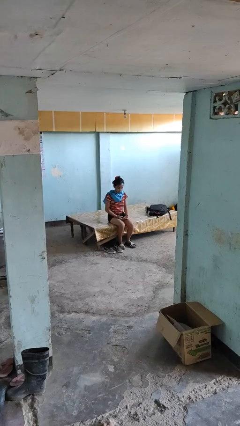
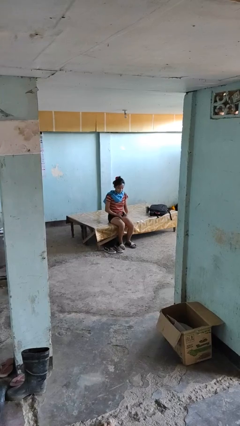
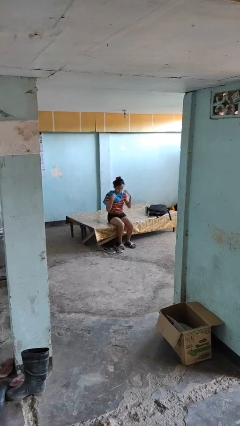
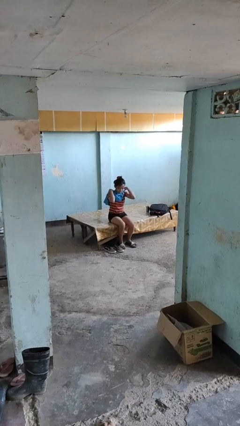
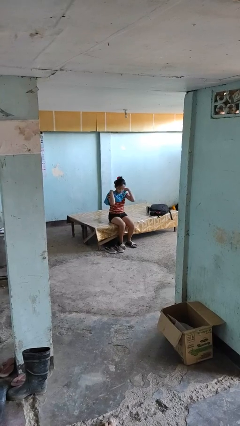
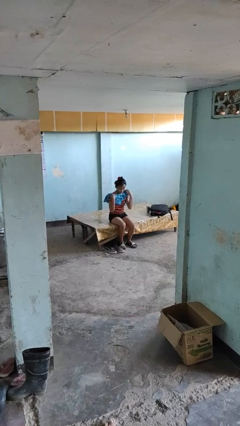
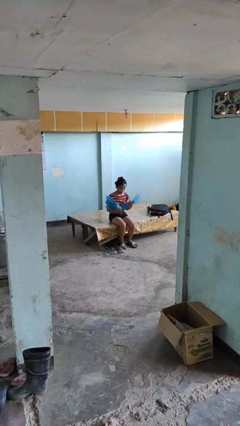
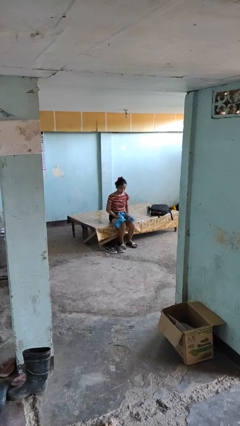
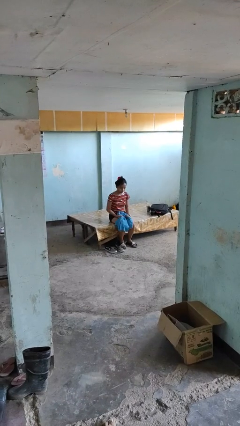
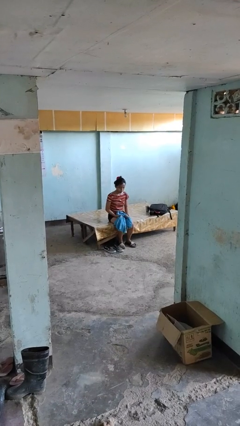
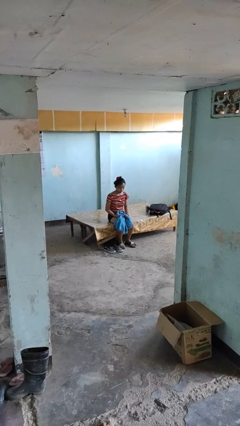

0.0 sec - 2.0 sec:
person takes off scarf

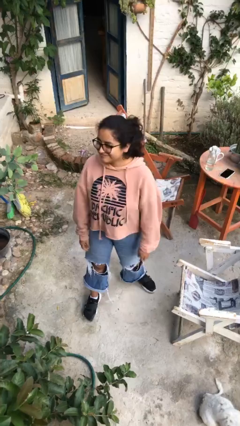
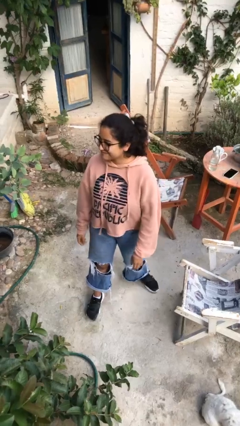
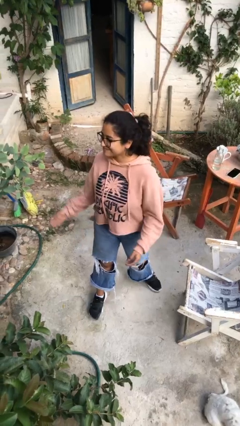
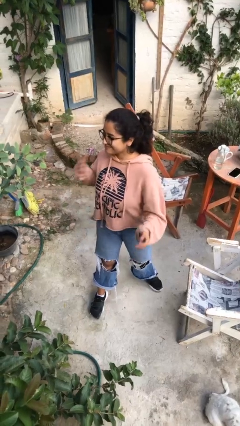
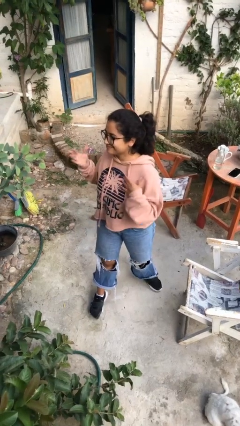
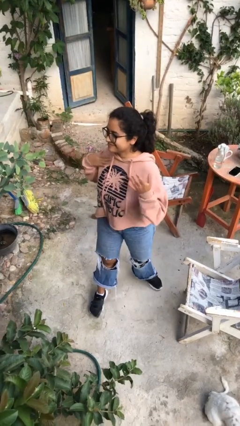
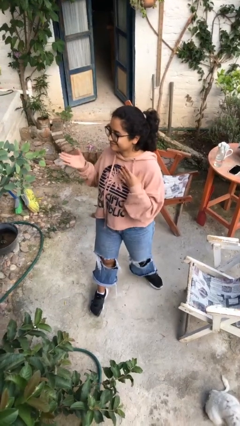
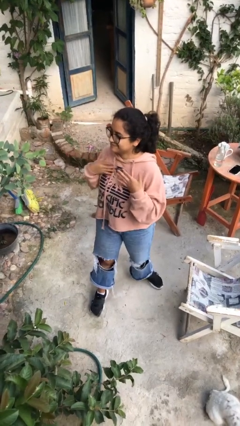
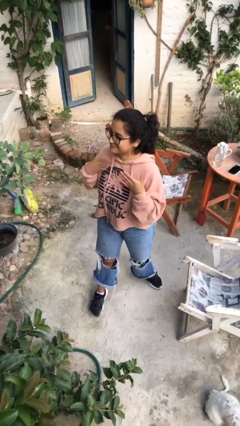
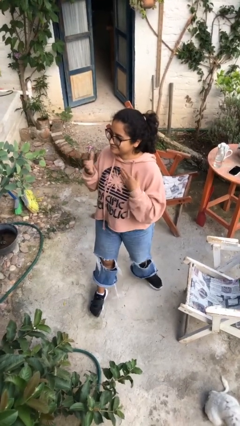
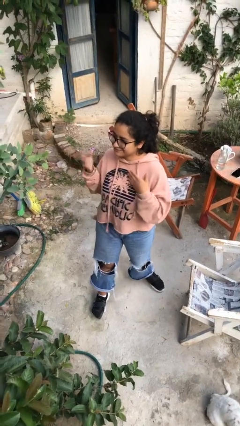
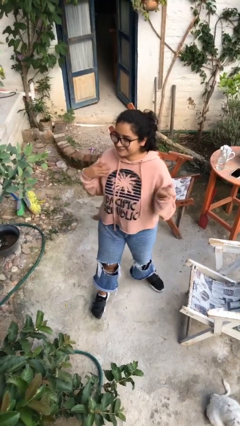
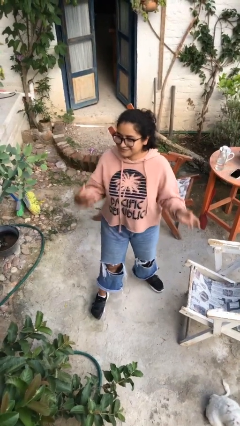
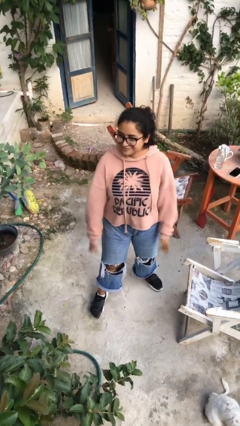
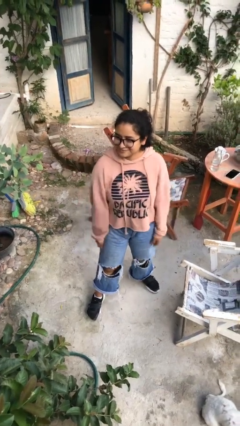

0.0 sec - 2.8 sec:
person drums on chest

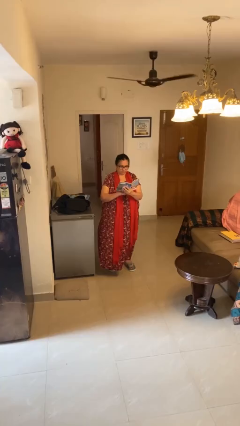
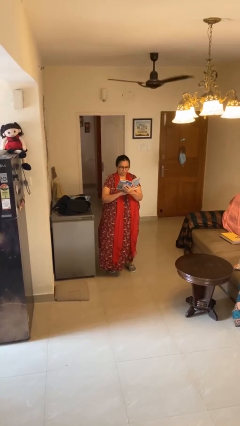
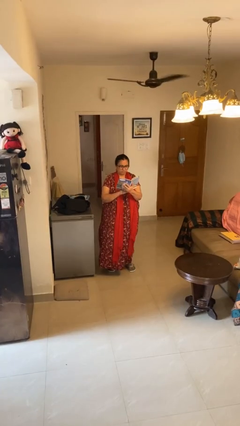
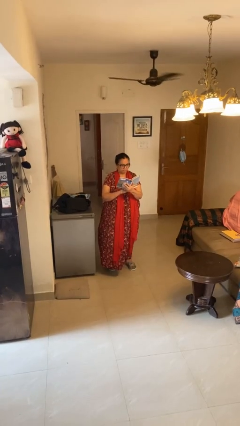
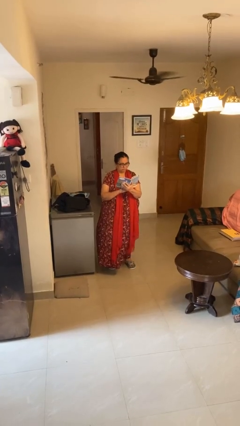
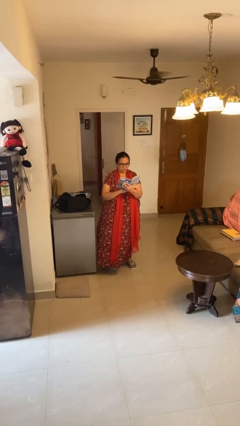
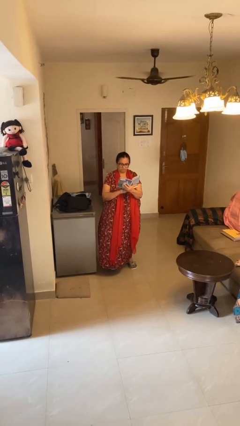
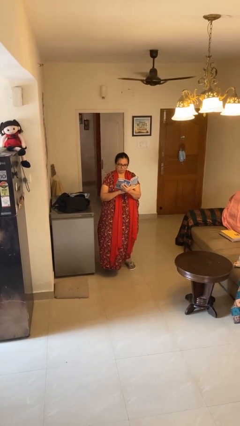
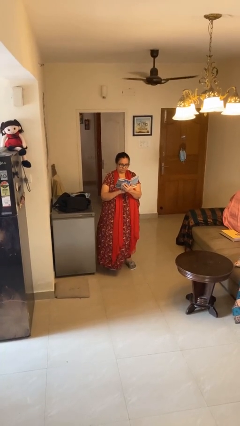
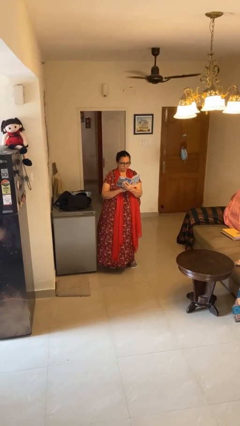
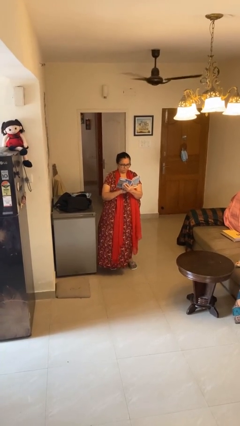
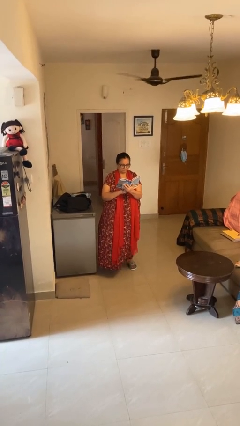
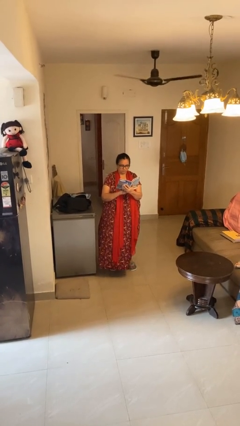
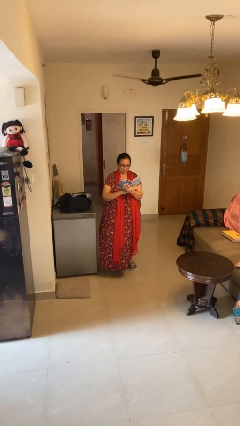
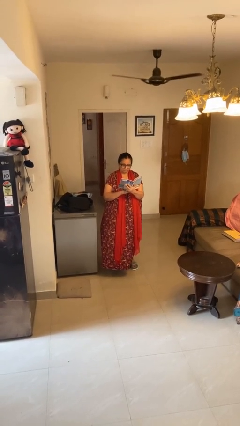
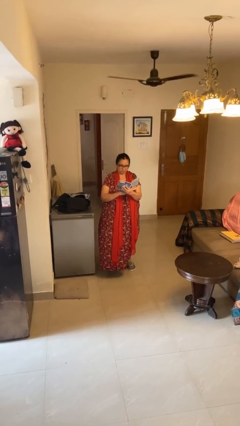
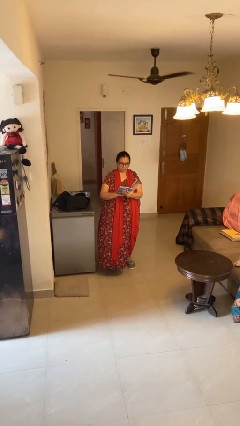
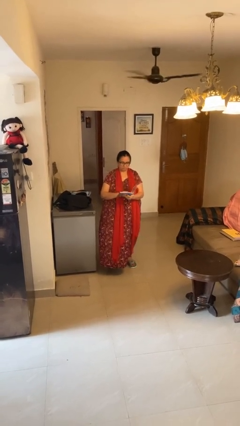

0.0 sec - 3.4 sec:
person reads document

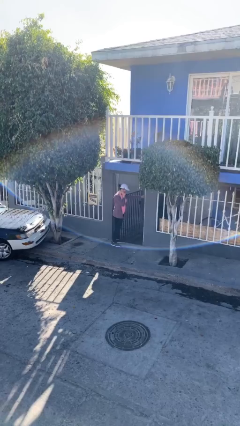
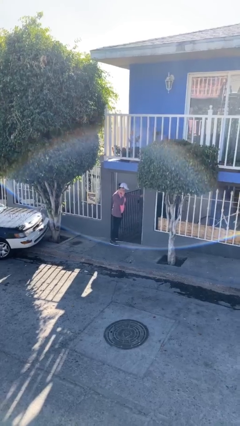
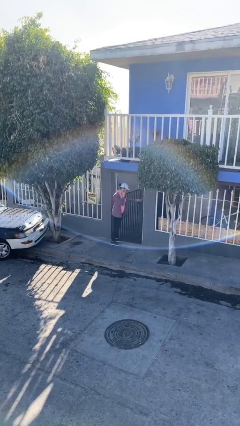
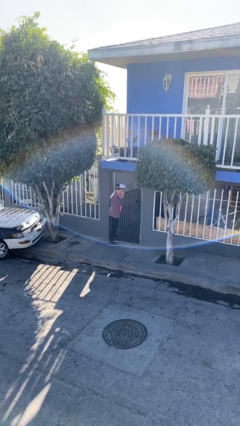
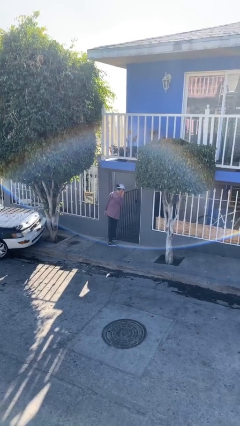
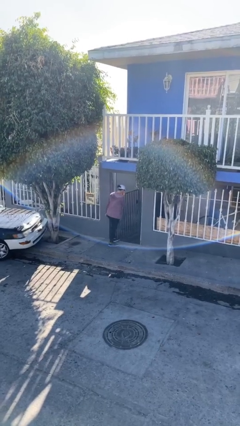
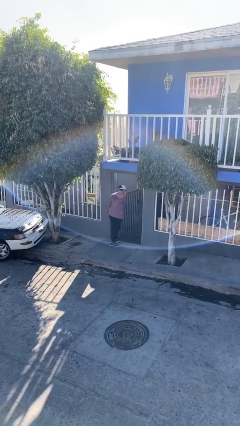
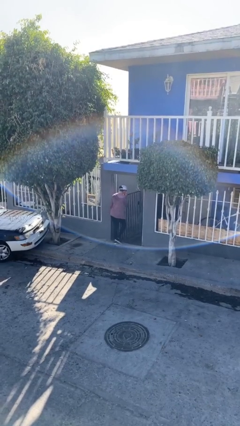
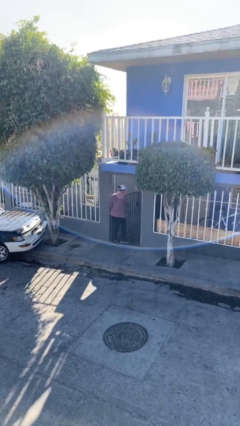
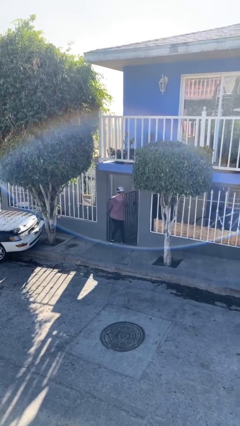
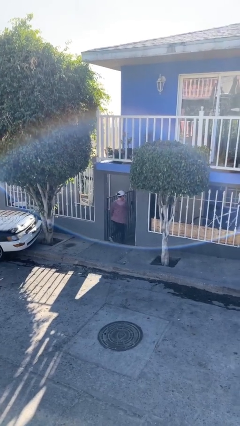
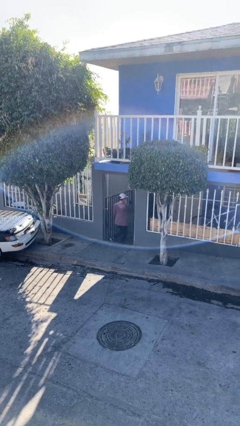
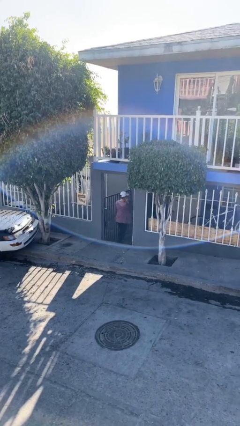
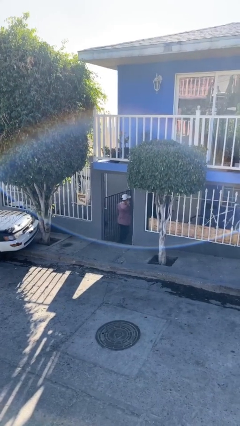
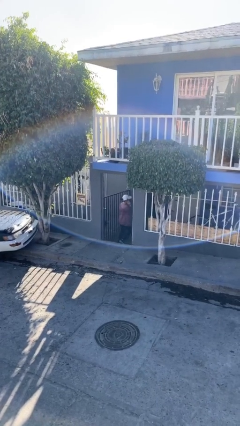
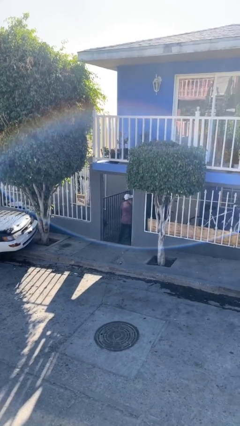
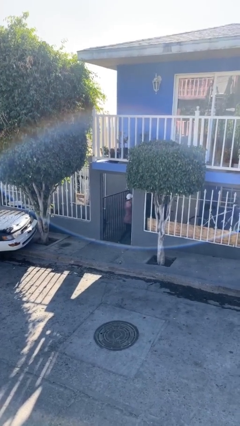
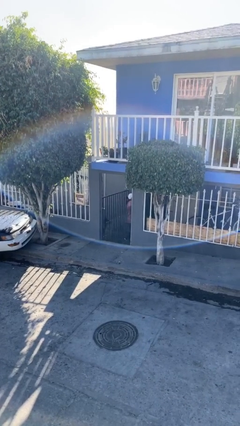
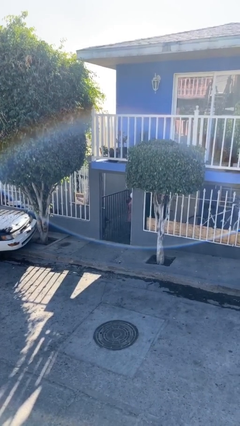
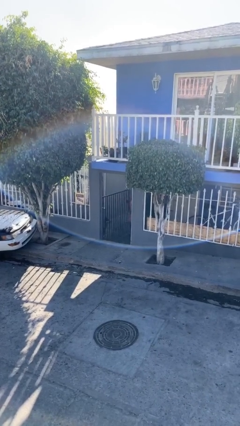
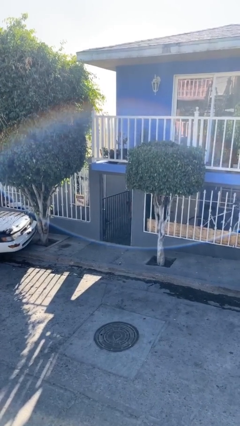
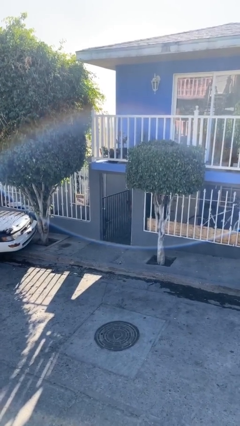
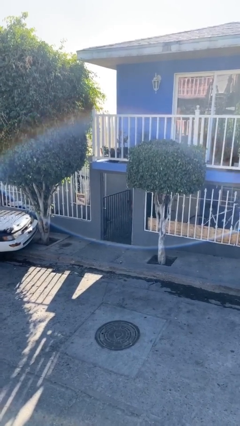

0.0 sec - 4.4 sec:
person exits scene through structure

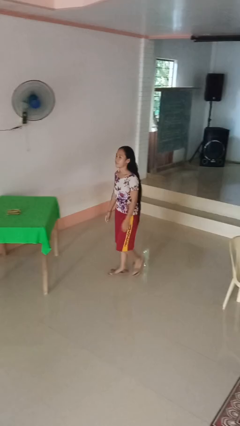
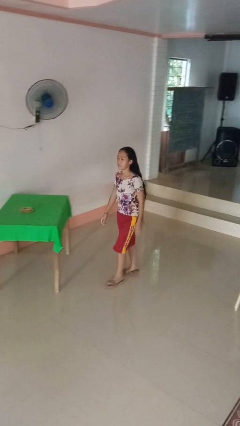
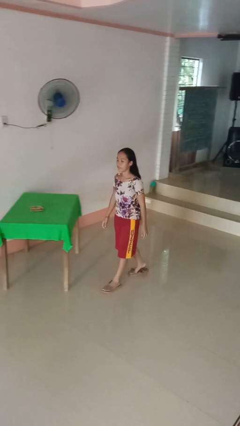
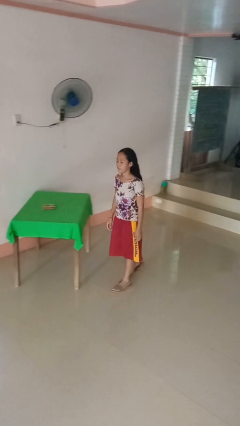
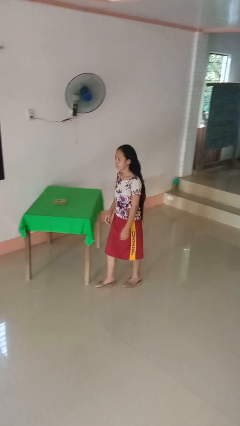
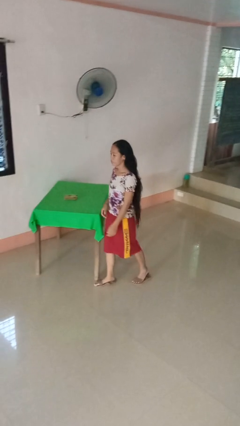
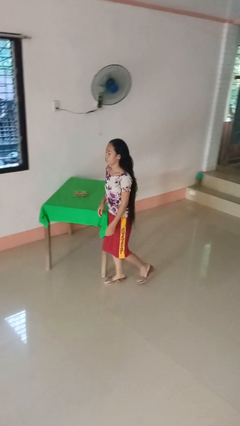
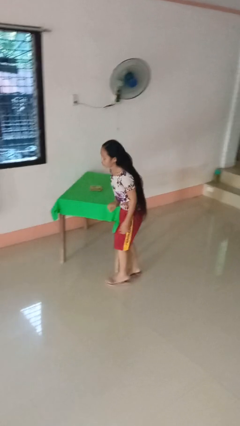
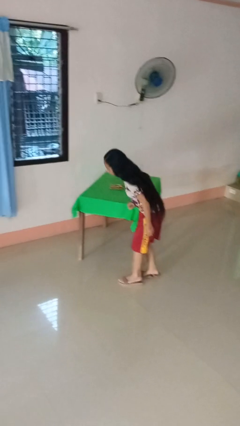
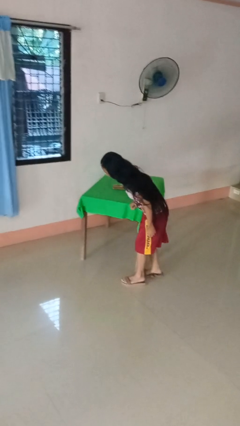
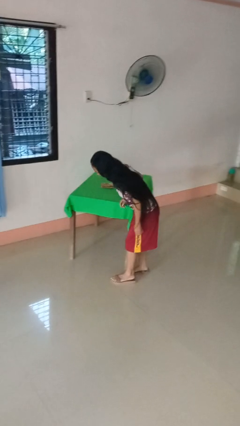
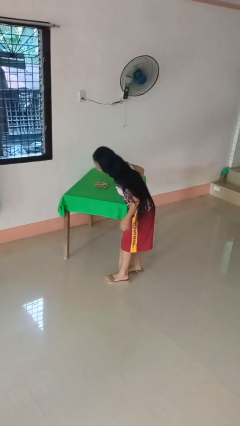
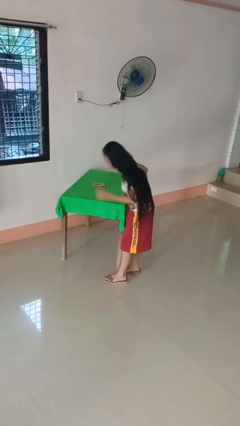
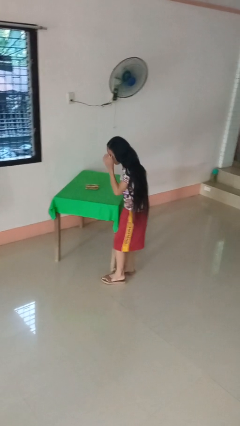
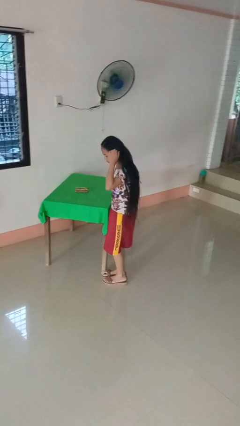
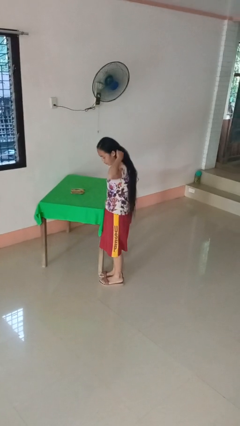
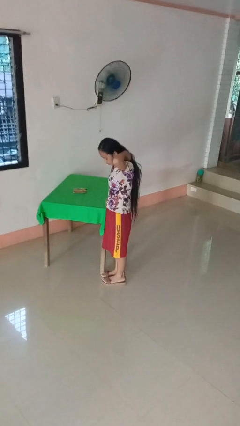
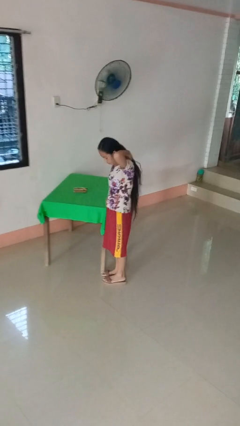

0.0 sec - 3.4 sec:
person bumps into table

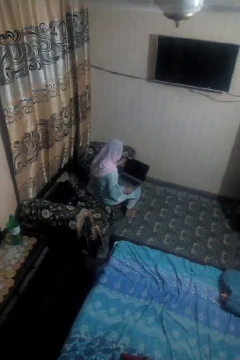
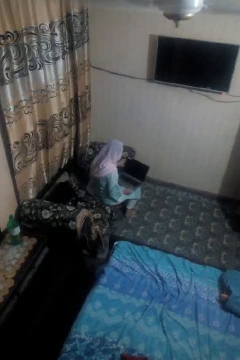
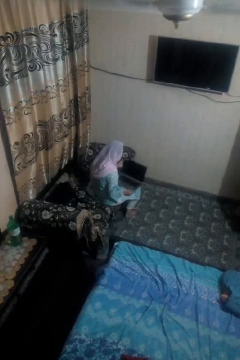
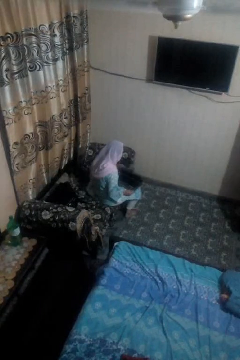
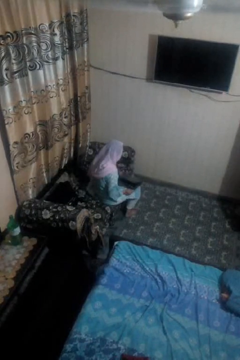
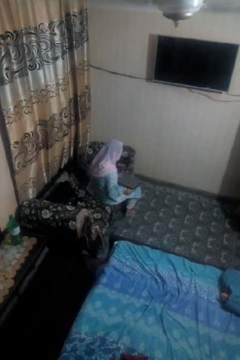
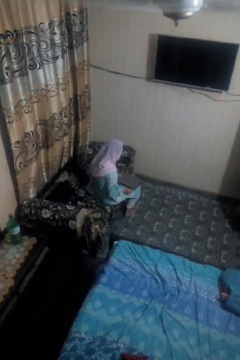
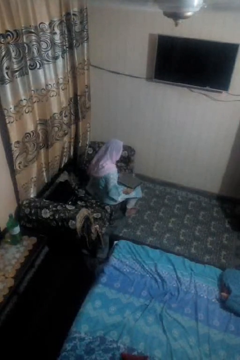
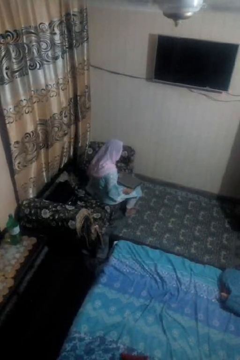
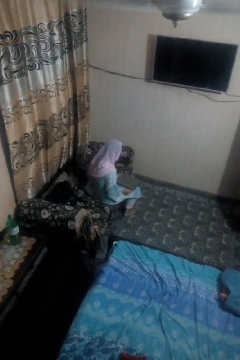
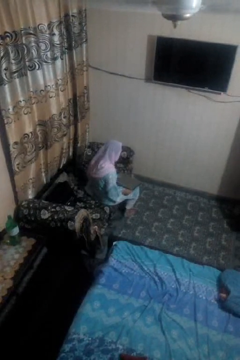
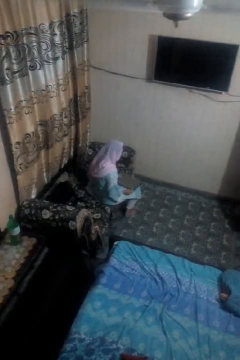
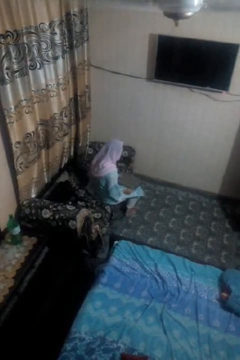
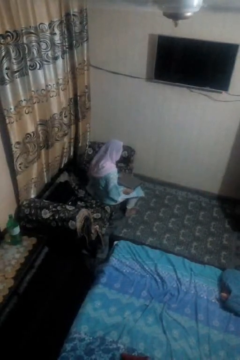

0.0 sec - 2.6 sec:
person closes laptop
